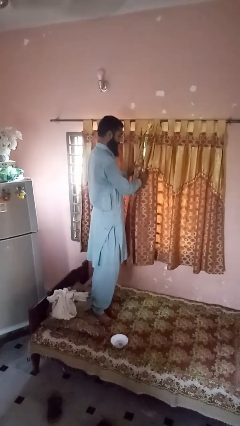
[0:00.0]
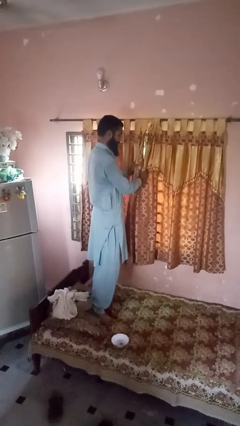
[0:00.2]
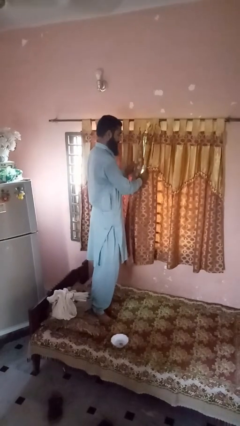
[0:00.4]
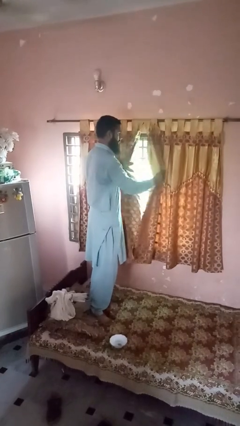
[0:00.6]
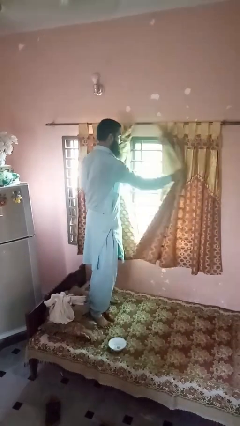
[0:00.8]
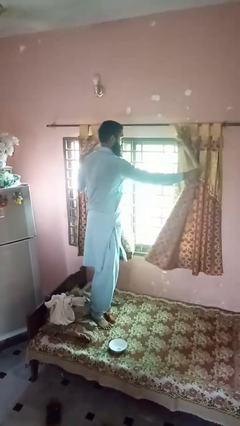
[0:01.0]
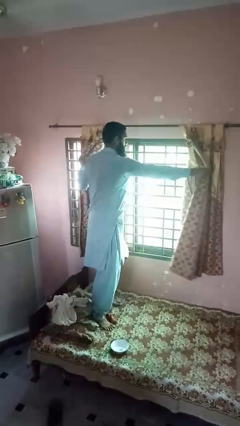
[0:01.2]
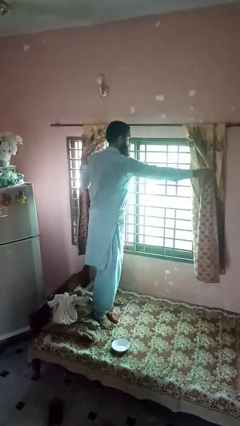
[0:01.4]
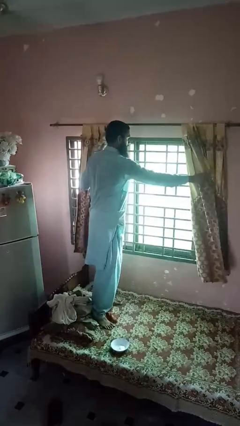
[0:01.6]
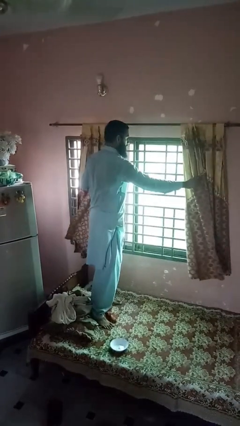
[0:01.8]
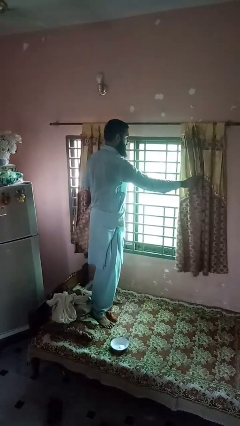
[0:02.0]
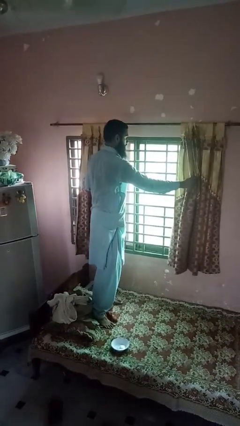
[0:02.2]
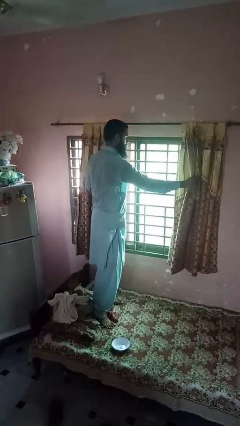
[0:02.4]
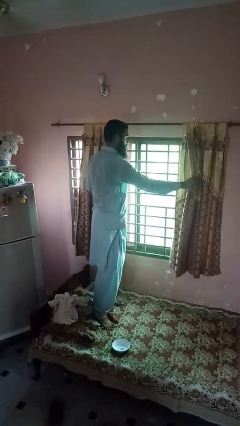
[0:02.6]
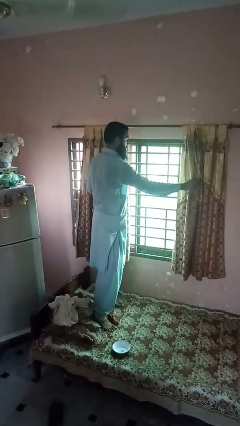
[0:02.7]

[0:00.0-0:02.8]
person opens curtains

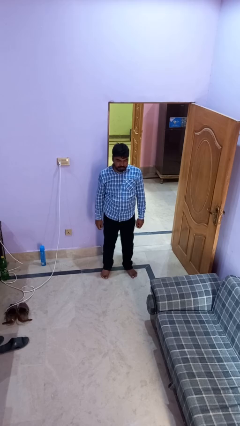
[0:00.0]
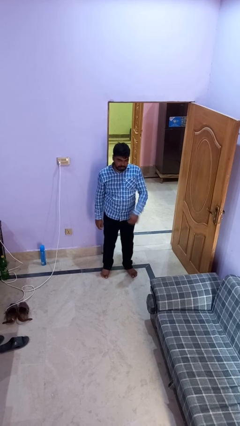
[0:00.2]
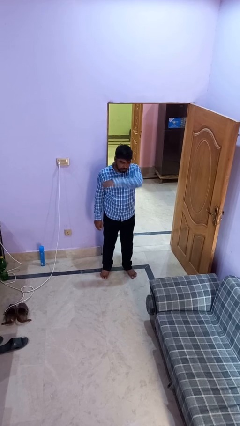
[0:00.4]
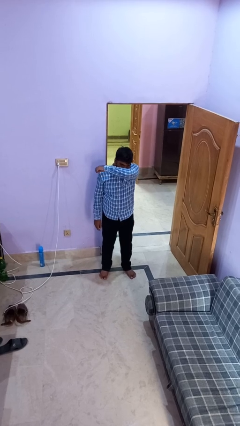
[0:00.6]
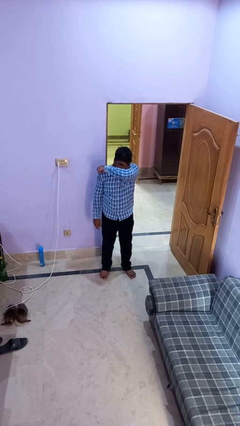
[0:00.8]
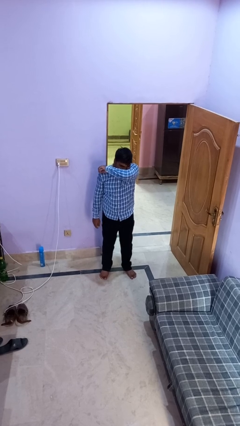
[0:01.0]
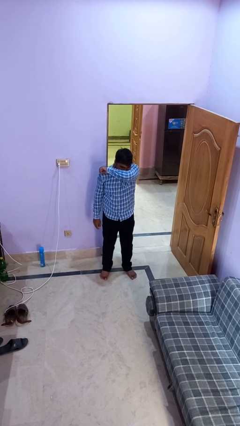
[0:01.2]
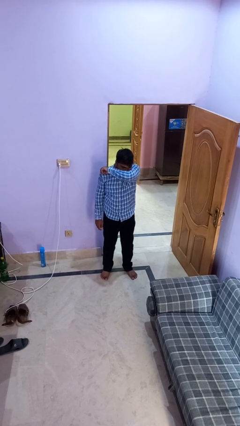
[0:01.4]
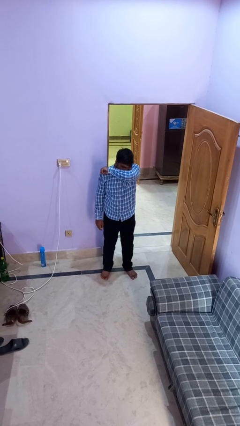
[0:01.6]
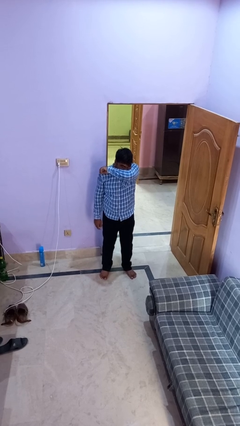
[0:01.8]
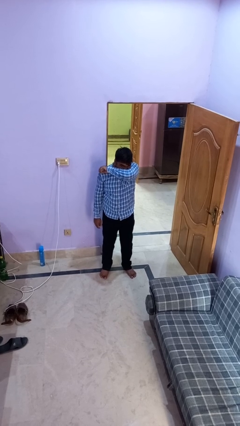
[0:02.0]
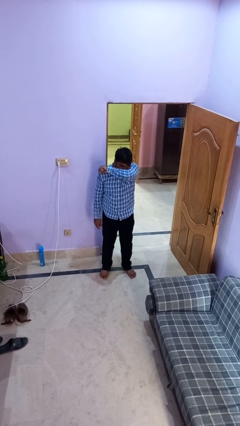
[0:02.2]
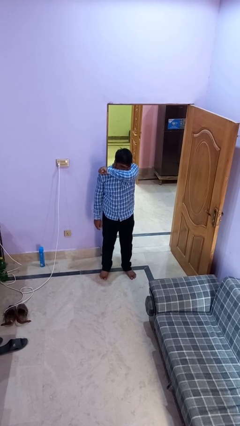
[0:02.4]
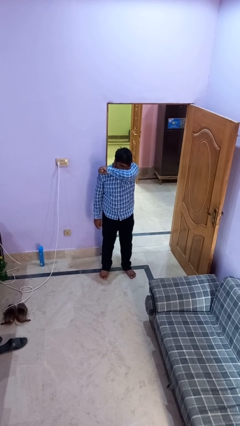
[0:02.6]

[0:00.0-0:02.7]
person sneezes into arm

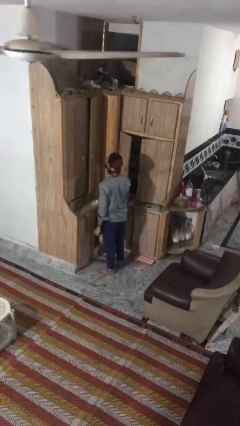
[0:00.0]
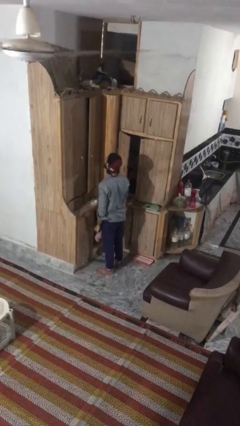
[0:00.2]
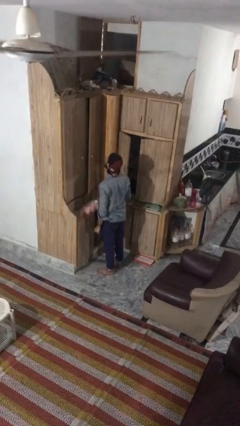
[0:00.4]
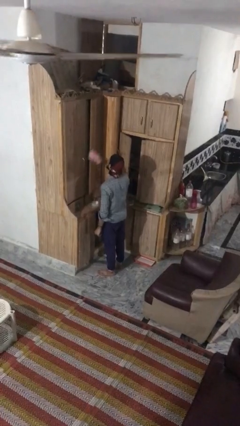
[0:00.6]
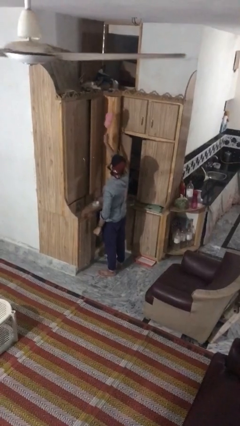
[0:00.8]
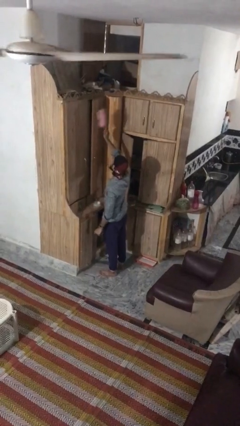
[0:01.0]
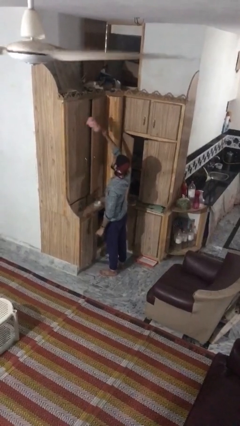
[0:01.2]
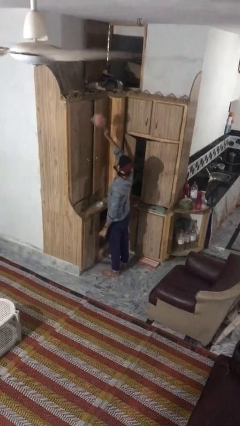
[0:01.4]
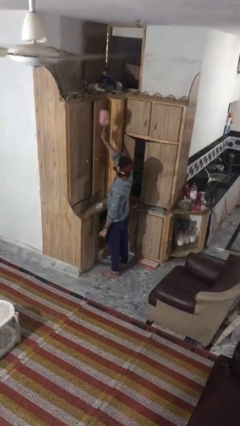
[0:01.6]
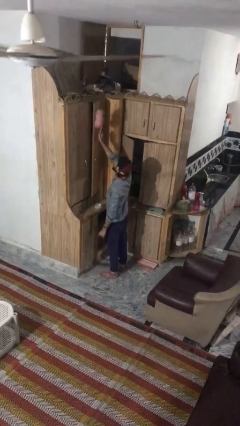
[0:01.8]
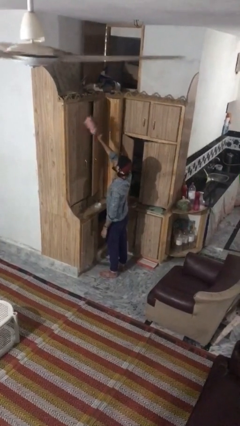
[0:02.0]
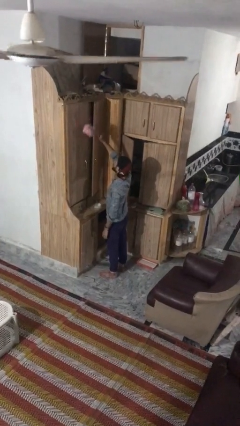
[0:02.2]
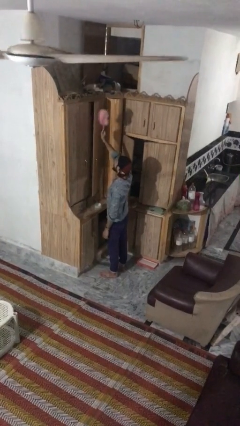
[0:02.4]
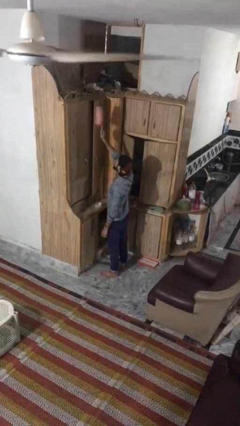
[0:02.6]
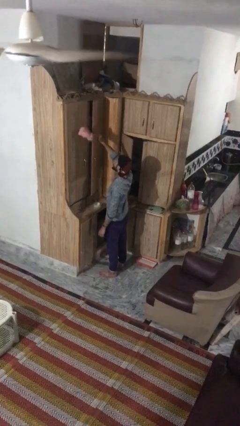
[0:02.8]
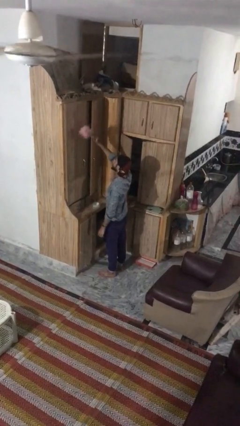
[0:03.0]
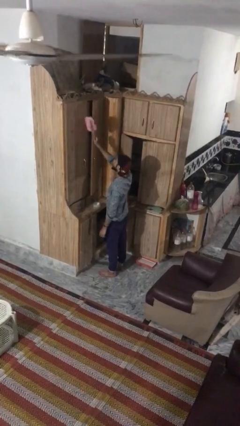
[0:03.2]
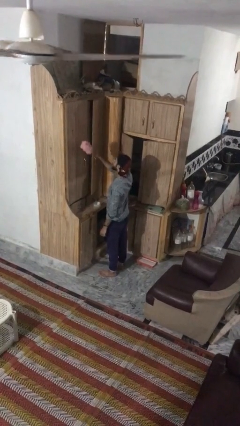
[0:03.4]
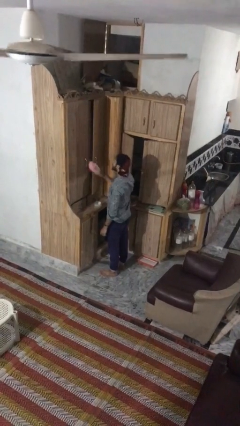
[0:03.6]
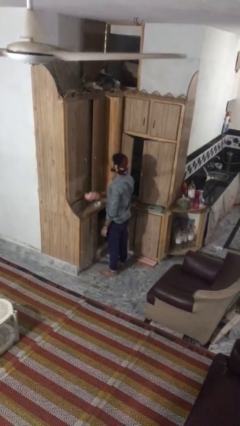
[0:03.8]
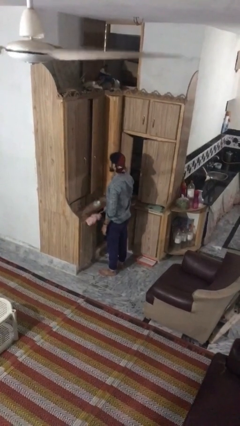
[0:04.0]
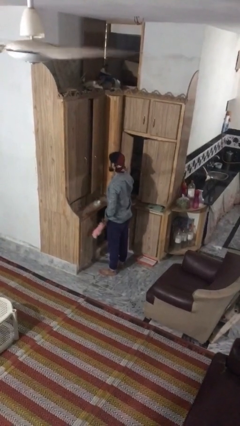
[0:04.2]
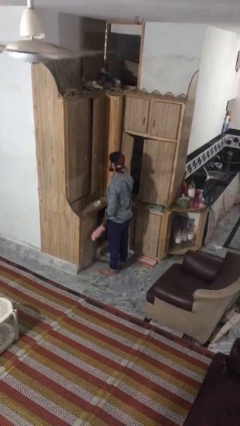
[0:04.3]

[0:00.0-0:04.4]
person dusts furniture

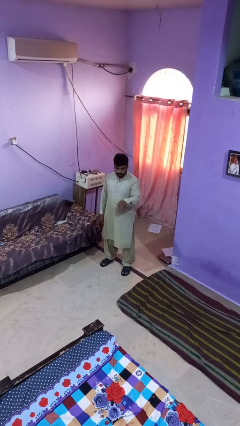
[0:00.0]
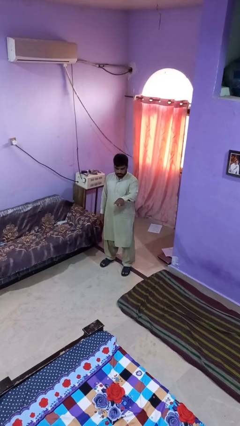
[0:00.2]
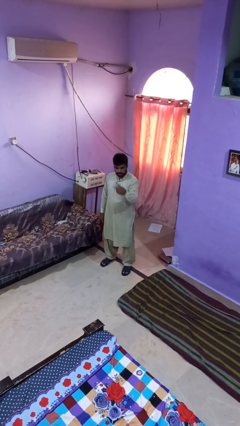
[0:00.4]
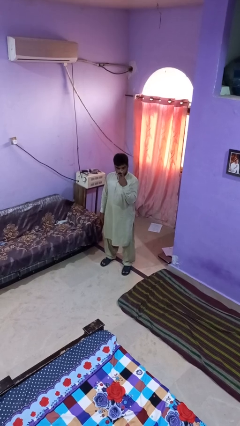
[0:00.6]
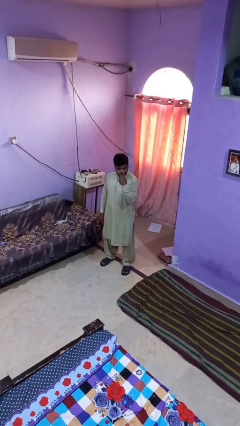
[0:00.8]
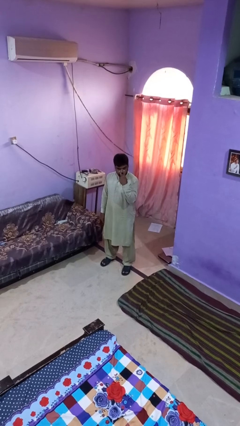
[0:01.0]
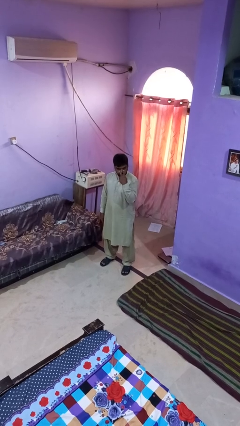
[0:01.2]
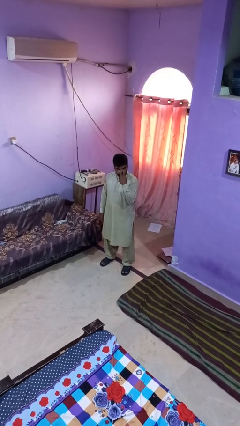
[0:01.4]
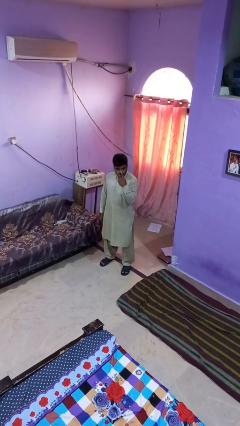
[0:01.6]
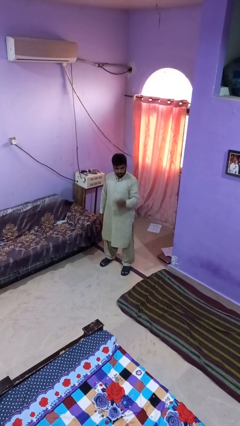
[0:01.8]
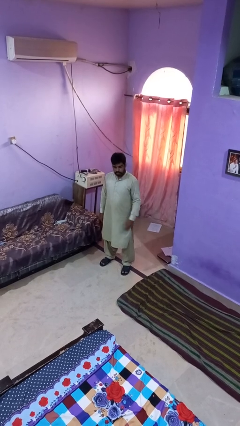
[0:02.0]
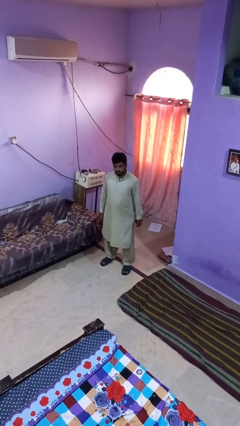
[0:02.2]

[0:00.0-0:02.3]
person gestures watch closely

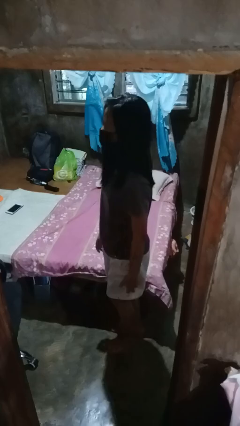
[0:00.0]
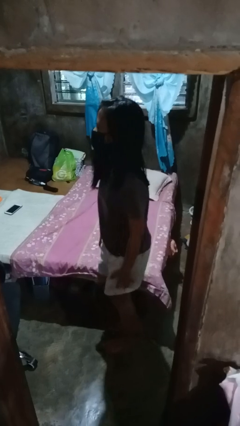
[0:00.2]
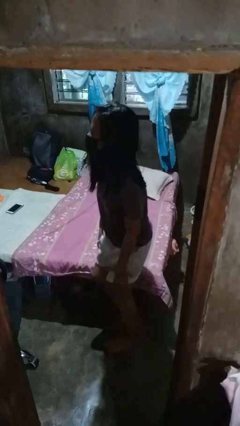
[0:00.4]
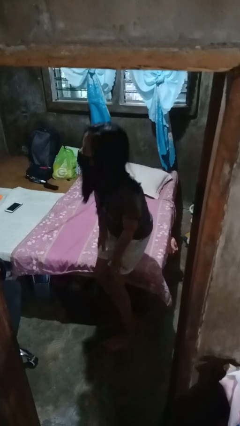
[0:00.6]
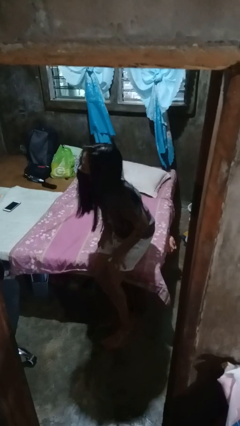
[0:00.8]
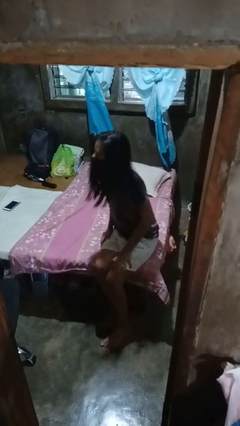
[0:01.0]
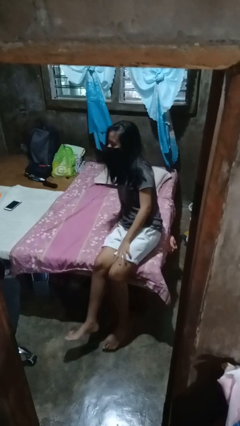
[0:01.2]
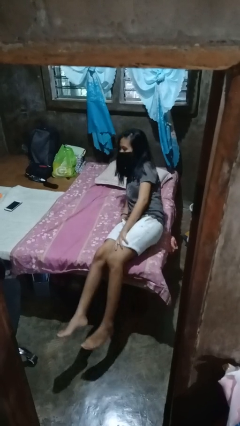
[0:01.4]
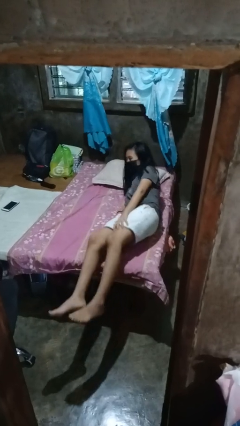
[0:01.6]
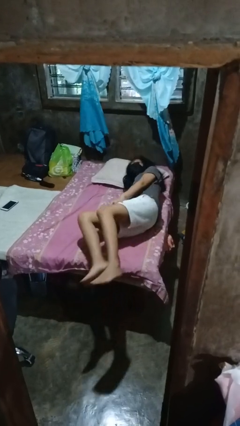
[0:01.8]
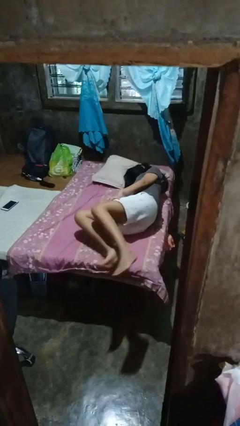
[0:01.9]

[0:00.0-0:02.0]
person lies down on bed

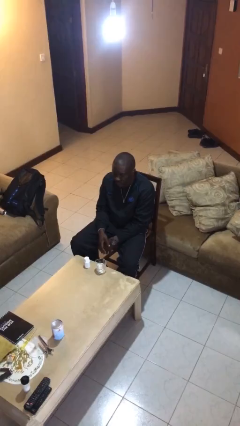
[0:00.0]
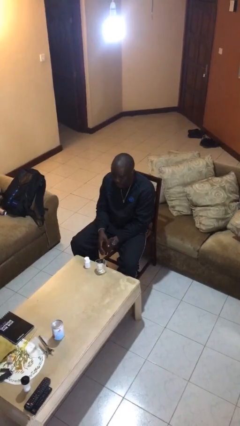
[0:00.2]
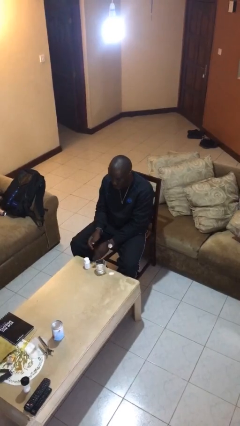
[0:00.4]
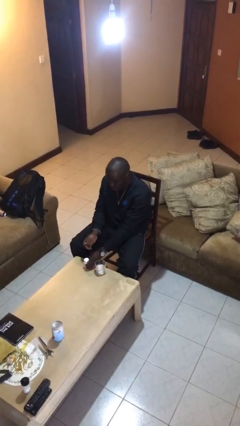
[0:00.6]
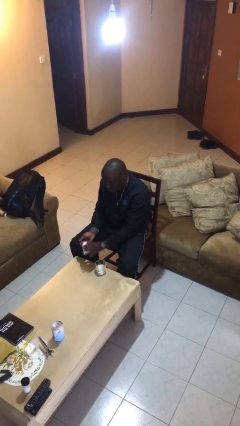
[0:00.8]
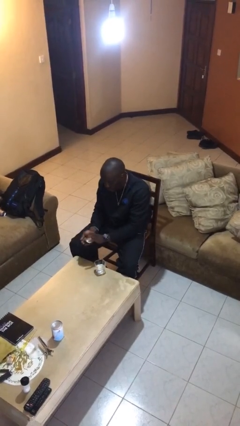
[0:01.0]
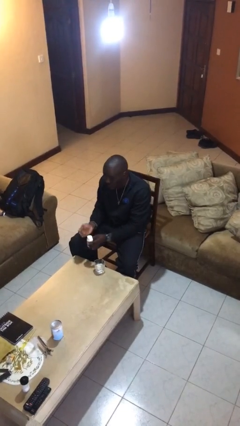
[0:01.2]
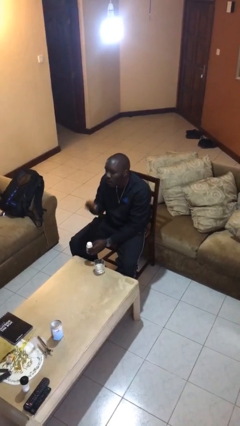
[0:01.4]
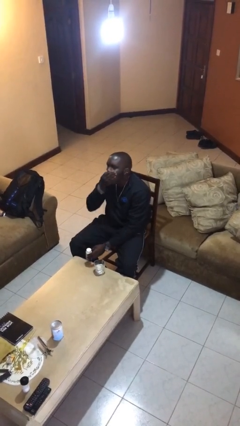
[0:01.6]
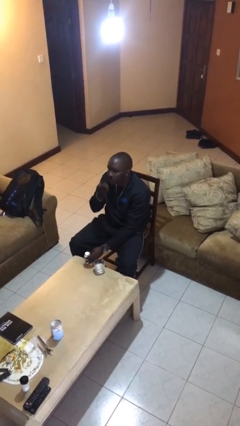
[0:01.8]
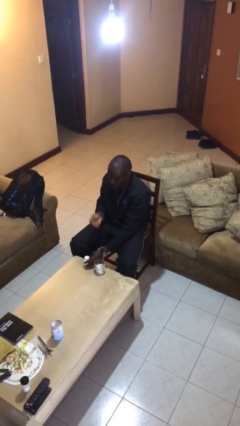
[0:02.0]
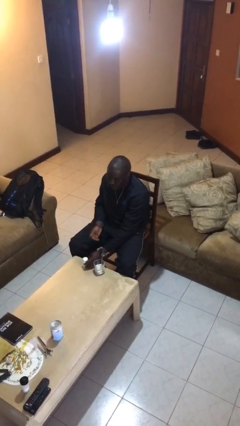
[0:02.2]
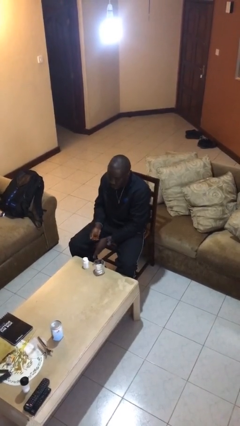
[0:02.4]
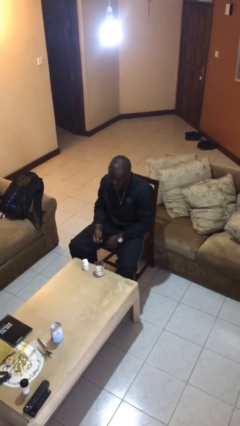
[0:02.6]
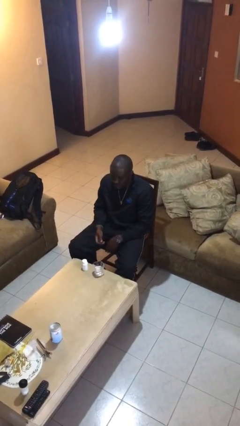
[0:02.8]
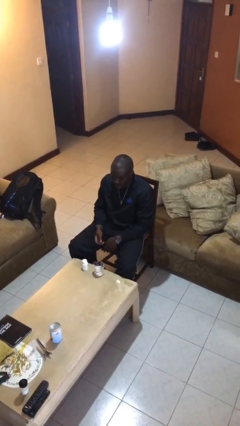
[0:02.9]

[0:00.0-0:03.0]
person takes medicine pills

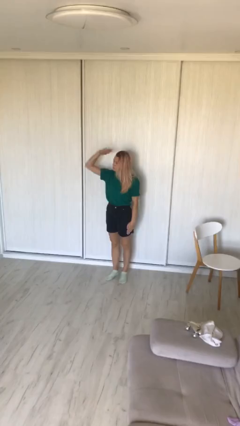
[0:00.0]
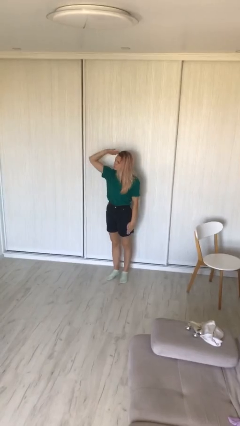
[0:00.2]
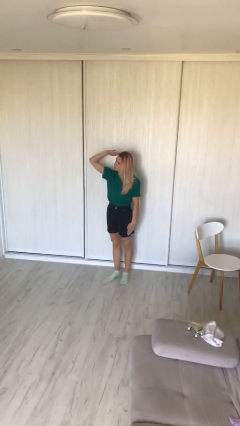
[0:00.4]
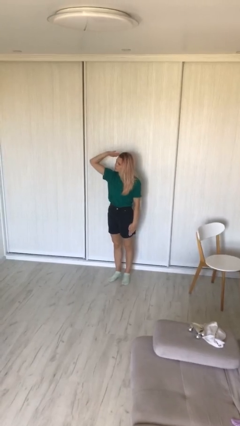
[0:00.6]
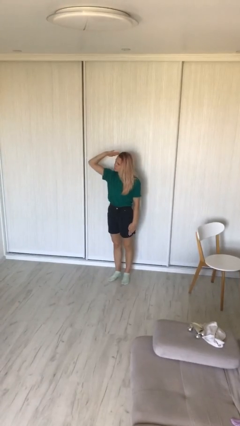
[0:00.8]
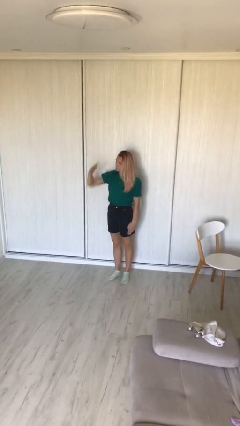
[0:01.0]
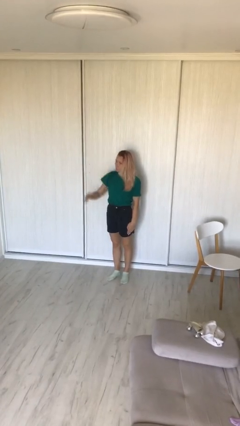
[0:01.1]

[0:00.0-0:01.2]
person salutes
